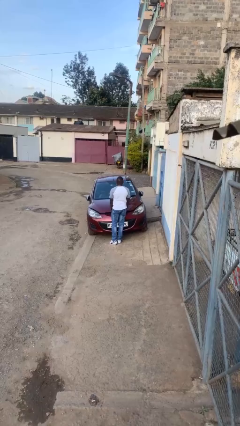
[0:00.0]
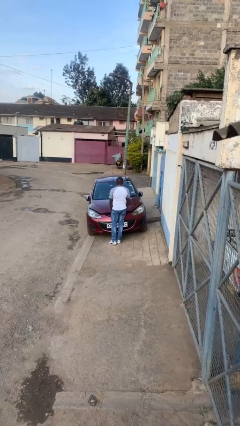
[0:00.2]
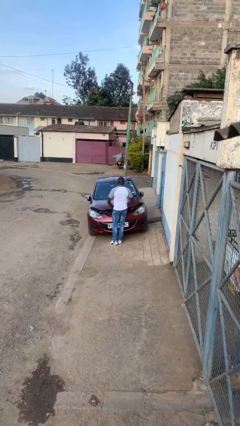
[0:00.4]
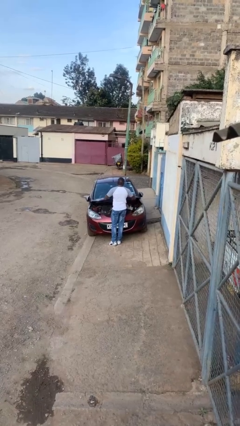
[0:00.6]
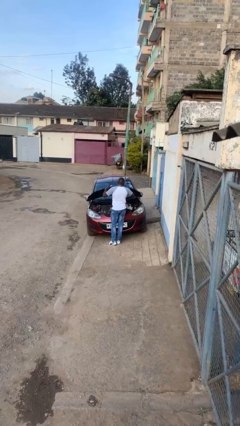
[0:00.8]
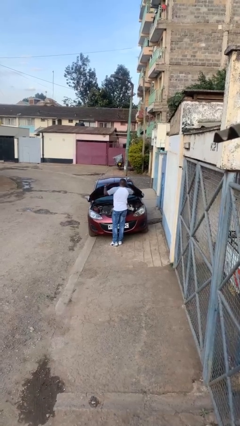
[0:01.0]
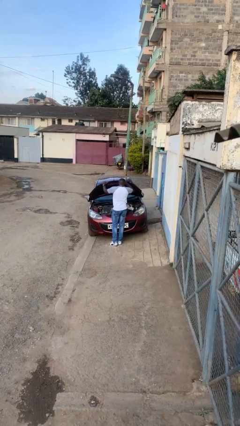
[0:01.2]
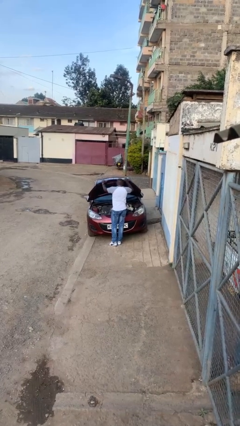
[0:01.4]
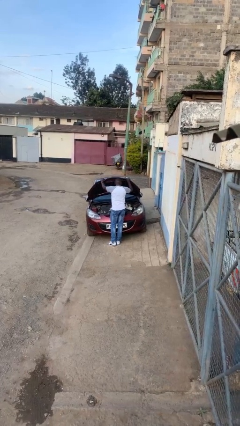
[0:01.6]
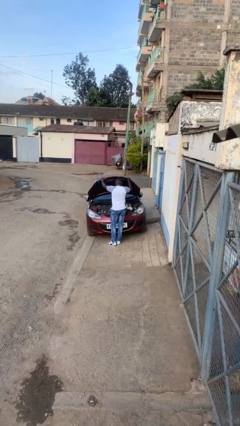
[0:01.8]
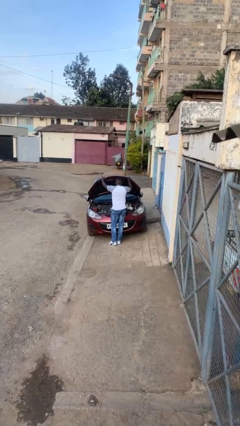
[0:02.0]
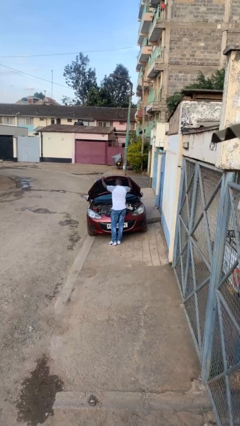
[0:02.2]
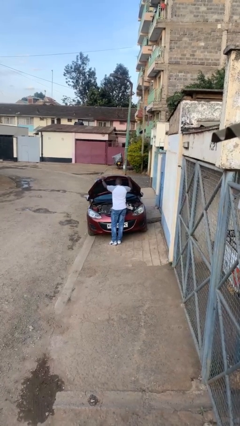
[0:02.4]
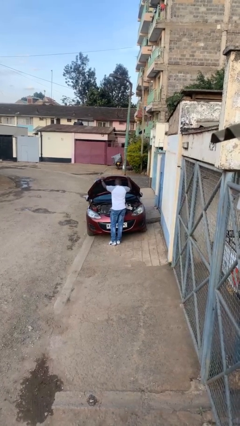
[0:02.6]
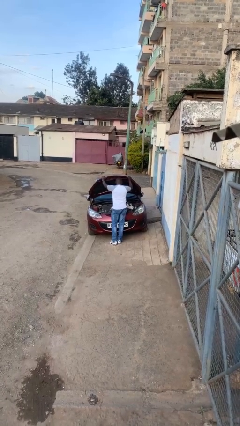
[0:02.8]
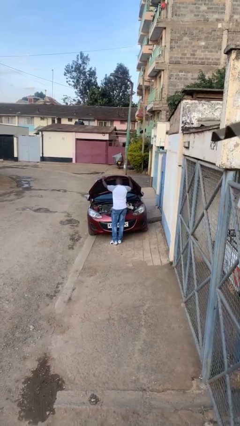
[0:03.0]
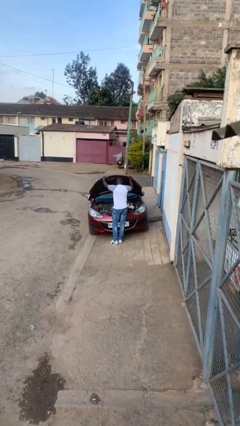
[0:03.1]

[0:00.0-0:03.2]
person opens car hood

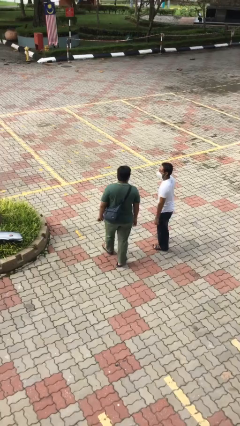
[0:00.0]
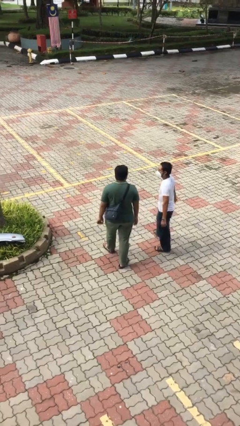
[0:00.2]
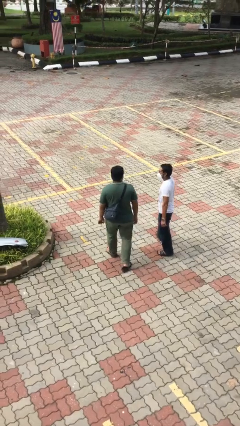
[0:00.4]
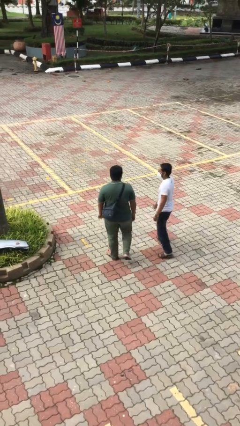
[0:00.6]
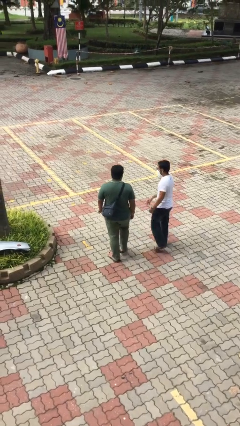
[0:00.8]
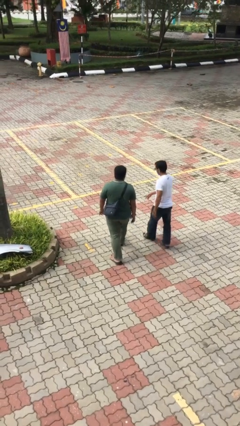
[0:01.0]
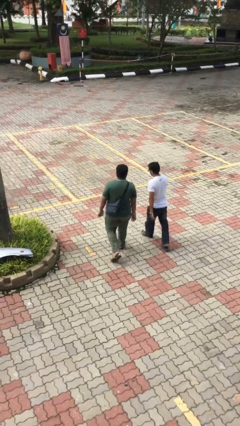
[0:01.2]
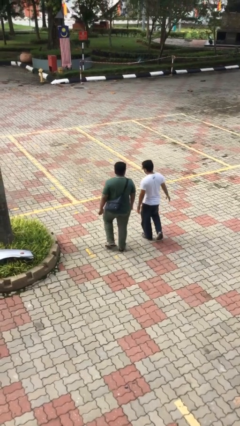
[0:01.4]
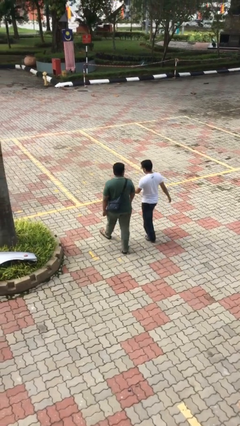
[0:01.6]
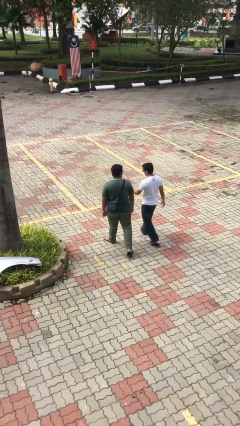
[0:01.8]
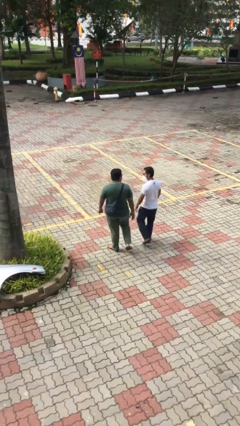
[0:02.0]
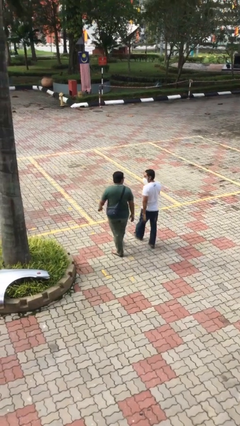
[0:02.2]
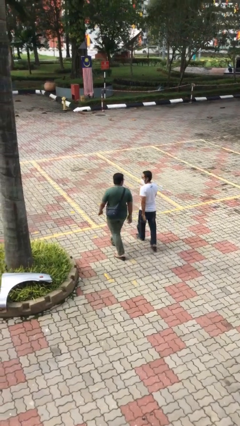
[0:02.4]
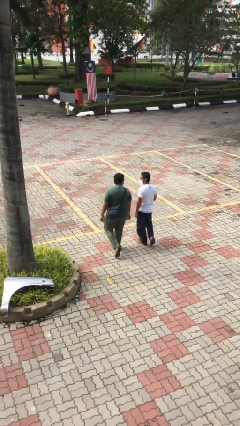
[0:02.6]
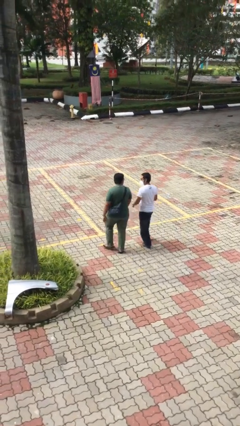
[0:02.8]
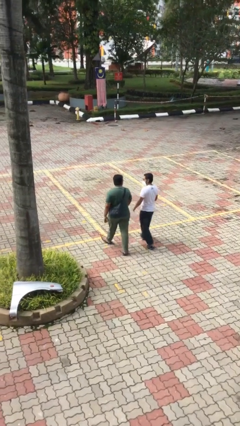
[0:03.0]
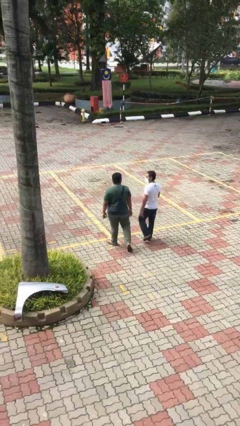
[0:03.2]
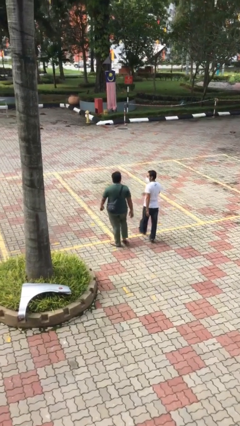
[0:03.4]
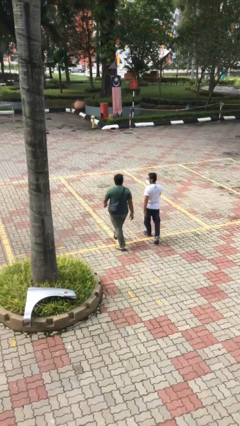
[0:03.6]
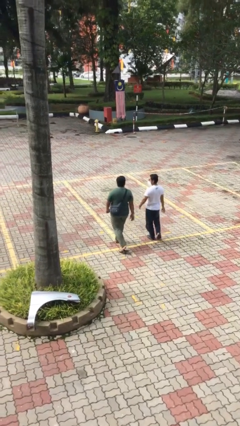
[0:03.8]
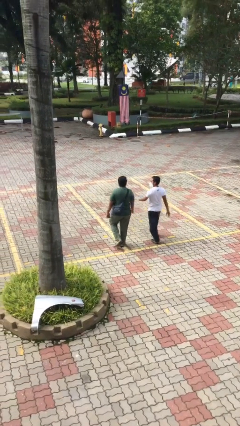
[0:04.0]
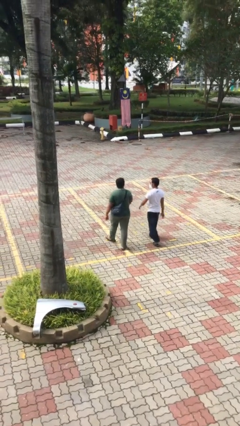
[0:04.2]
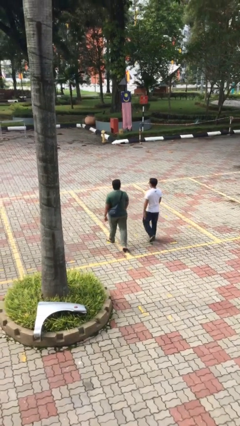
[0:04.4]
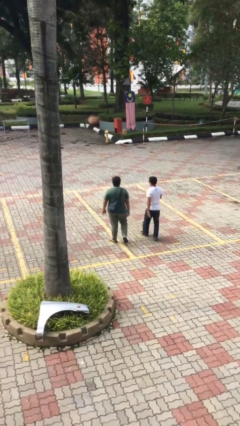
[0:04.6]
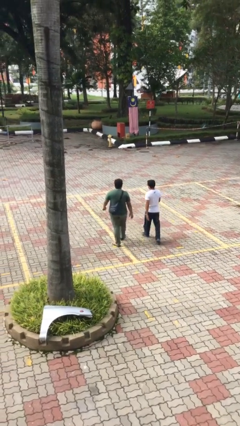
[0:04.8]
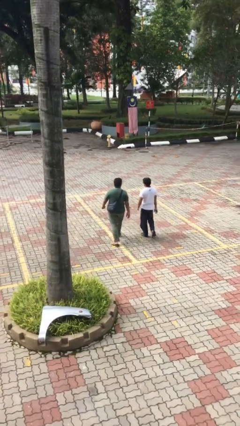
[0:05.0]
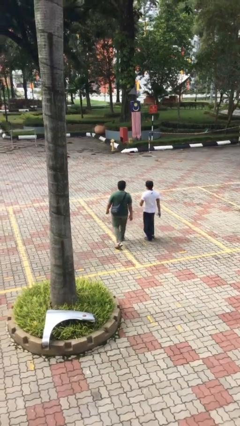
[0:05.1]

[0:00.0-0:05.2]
person talks to person

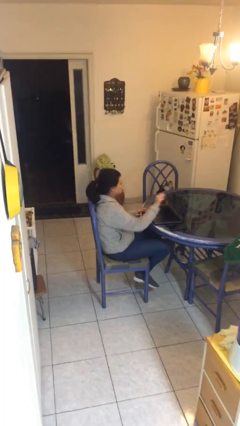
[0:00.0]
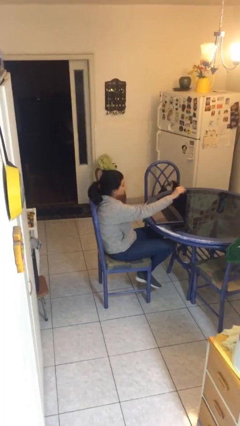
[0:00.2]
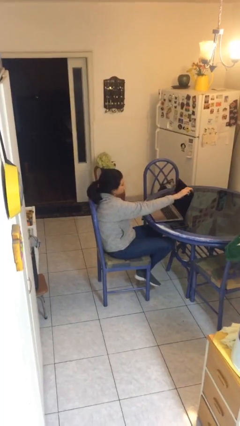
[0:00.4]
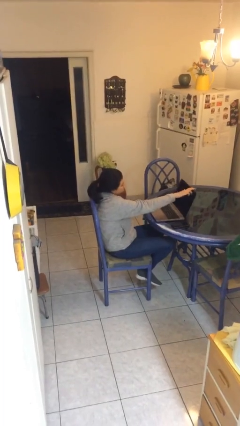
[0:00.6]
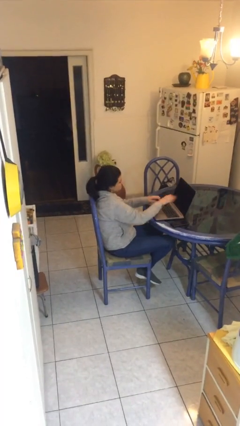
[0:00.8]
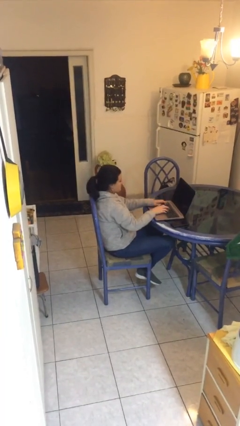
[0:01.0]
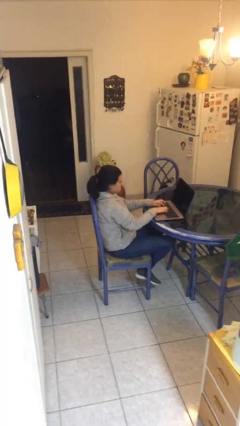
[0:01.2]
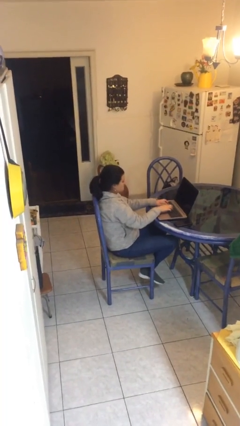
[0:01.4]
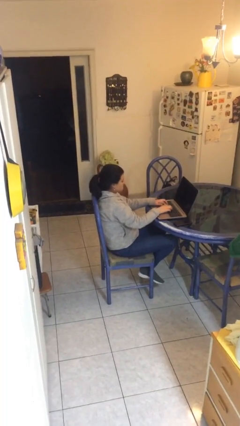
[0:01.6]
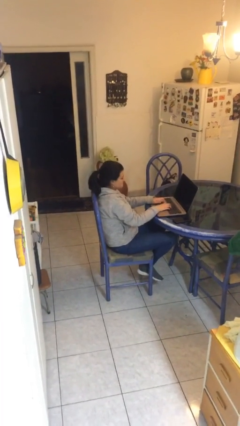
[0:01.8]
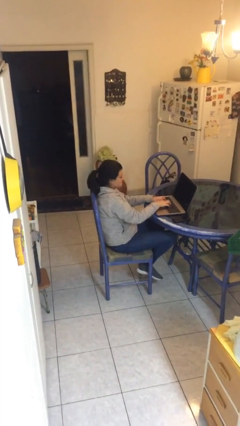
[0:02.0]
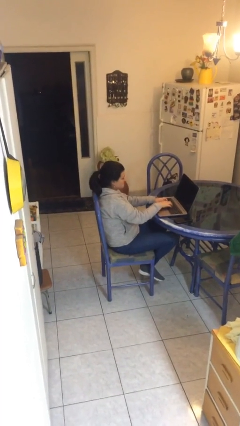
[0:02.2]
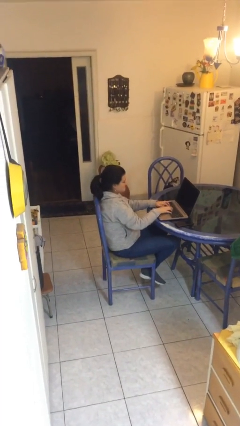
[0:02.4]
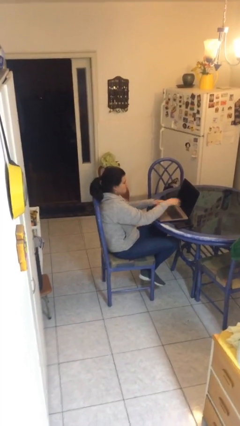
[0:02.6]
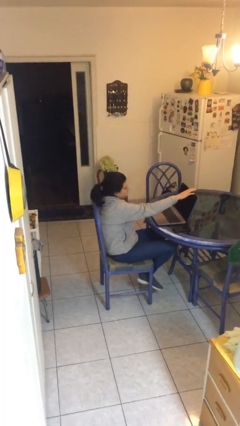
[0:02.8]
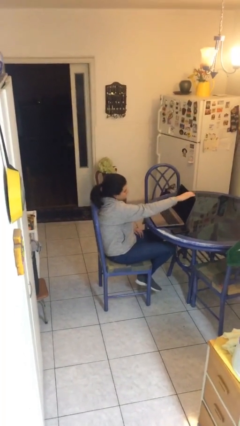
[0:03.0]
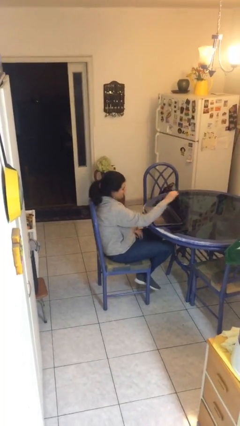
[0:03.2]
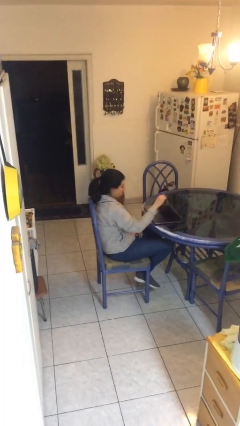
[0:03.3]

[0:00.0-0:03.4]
person interacts with laptop

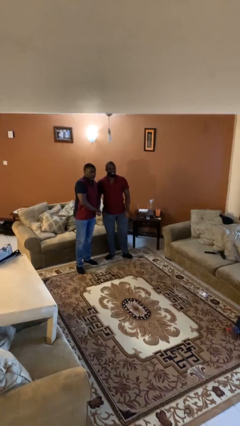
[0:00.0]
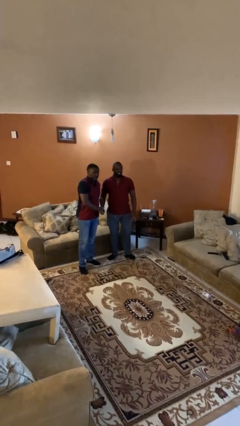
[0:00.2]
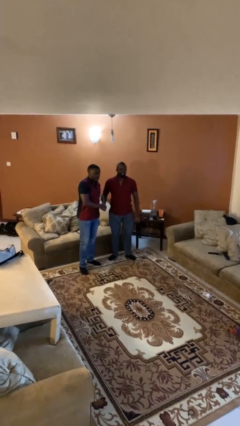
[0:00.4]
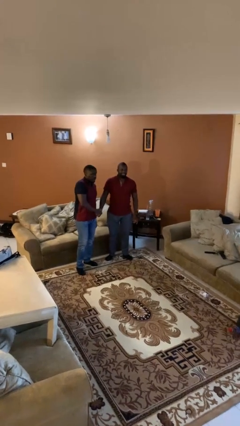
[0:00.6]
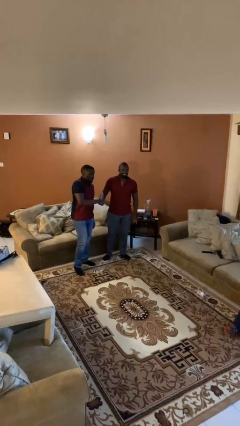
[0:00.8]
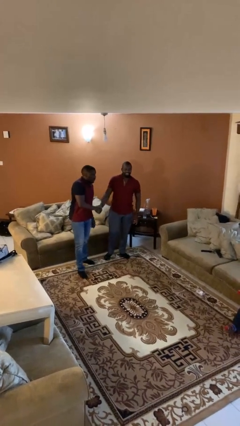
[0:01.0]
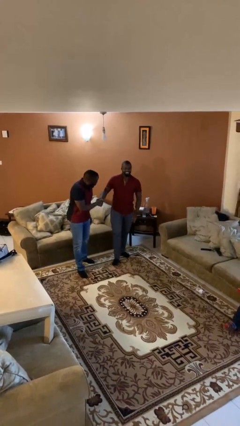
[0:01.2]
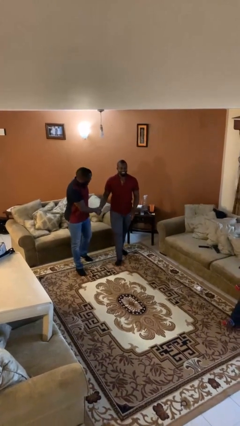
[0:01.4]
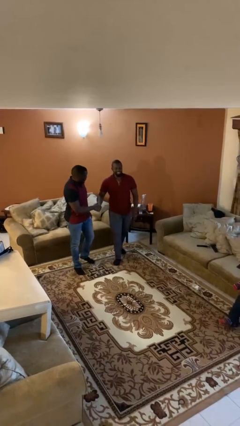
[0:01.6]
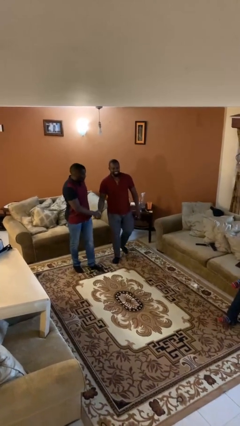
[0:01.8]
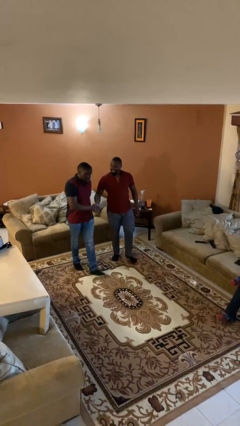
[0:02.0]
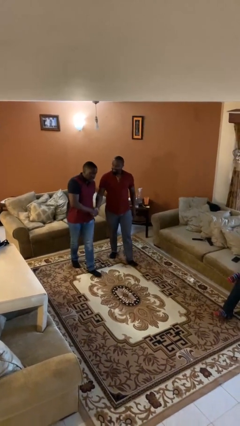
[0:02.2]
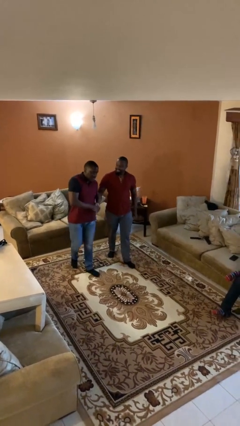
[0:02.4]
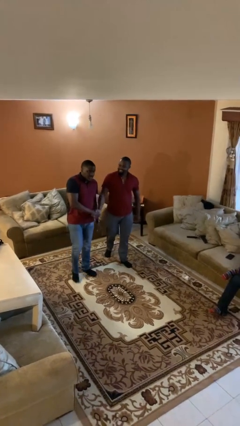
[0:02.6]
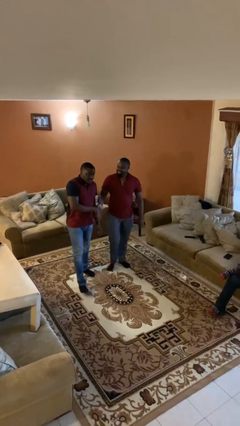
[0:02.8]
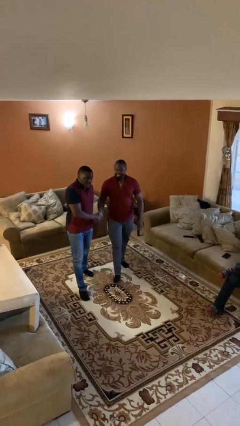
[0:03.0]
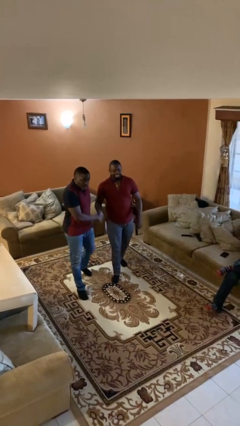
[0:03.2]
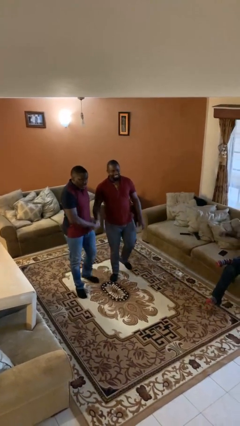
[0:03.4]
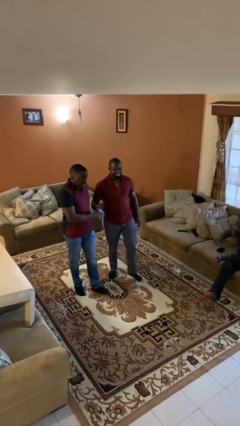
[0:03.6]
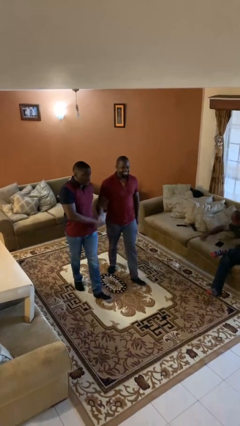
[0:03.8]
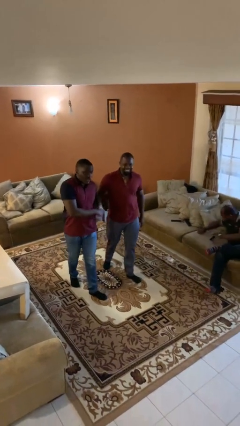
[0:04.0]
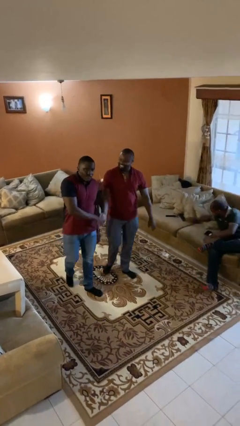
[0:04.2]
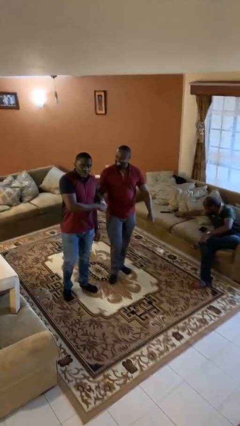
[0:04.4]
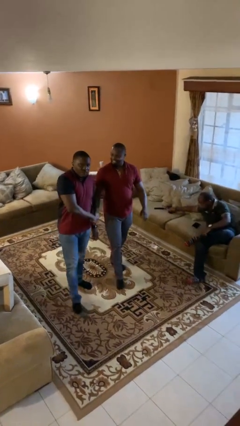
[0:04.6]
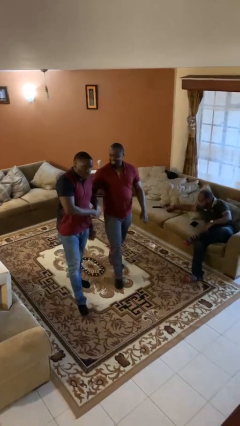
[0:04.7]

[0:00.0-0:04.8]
person holds hand

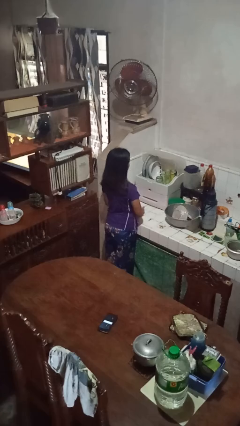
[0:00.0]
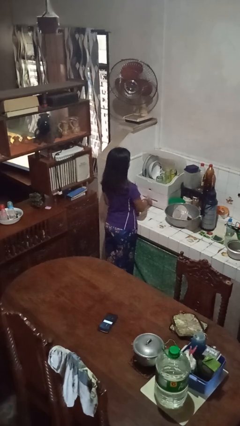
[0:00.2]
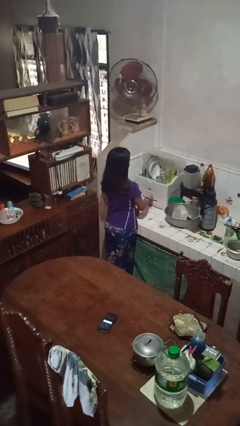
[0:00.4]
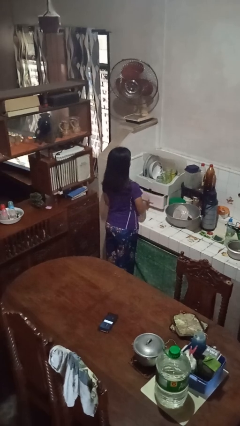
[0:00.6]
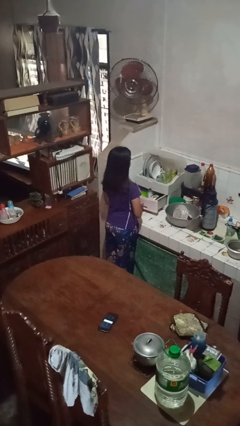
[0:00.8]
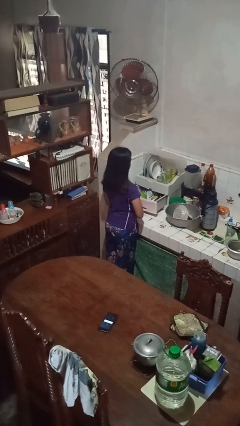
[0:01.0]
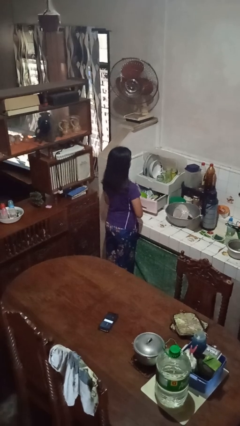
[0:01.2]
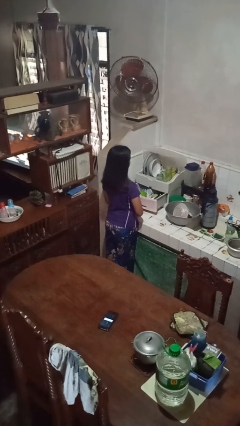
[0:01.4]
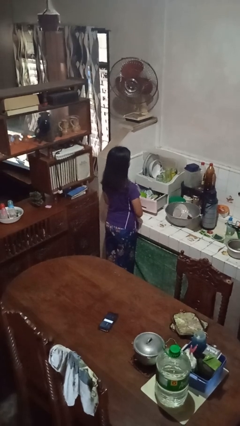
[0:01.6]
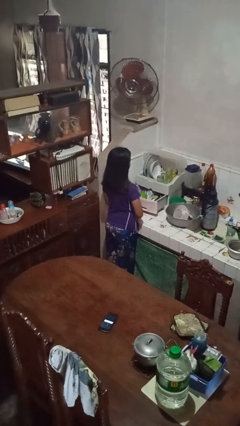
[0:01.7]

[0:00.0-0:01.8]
person opens kitchen drawer
